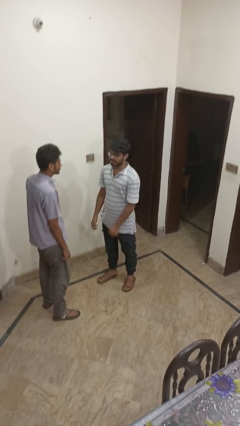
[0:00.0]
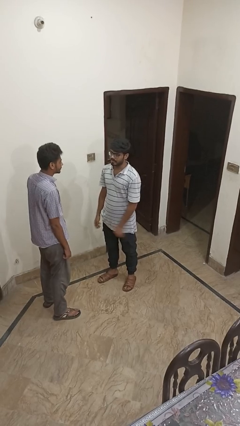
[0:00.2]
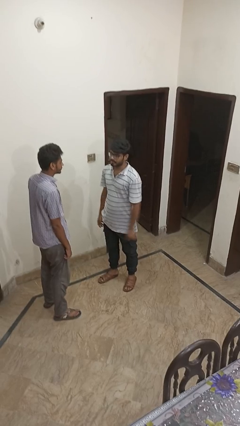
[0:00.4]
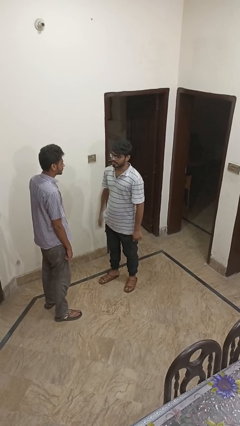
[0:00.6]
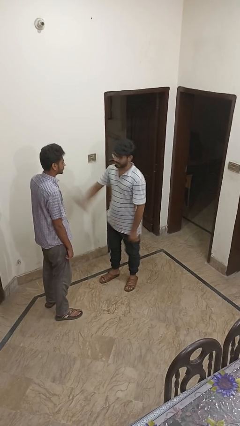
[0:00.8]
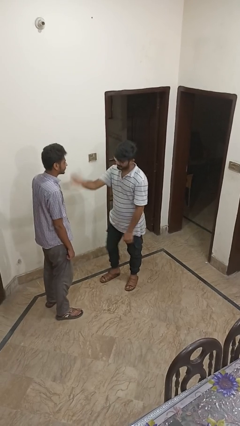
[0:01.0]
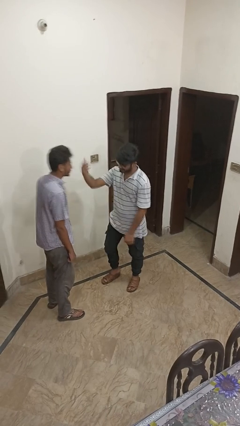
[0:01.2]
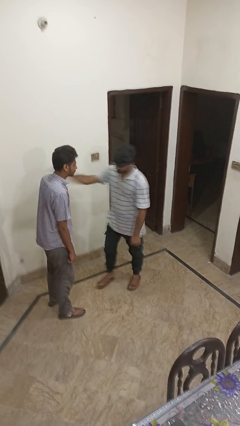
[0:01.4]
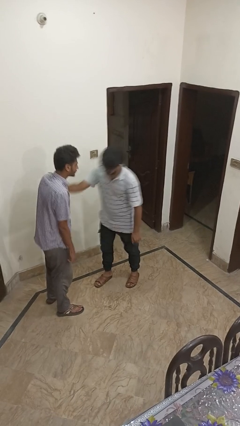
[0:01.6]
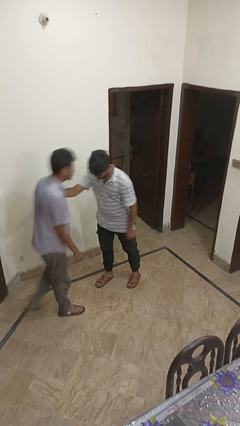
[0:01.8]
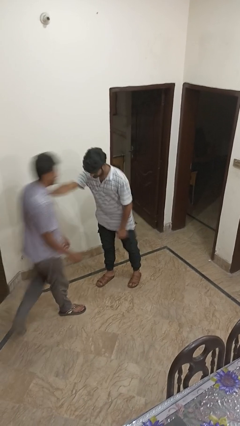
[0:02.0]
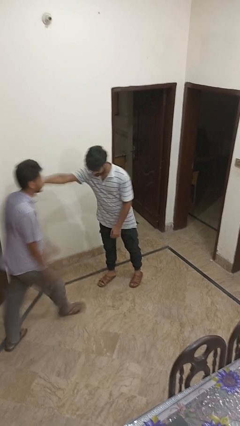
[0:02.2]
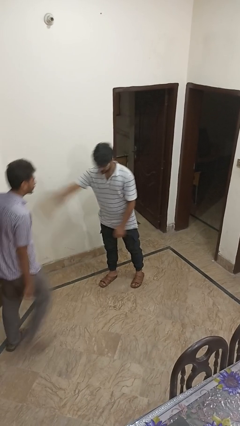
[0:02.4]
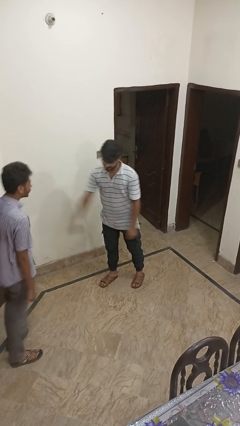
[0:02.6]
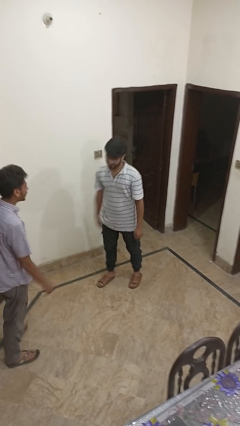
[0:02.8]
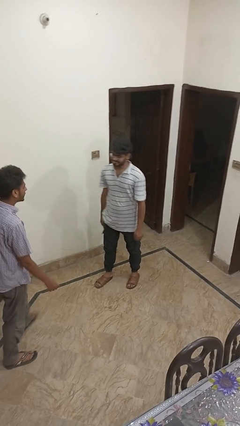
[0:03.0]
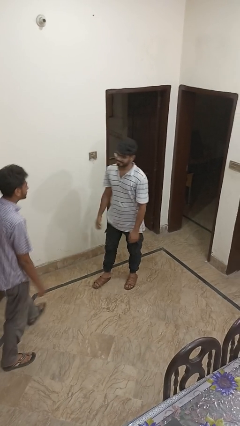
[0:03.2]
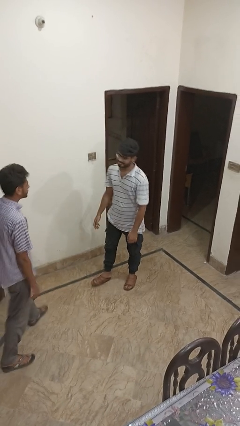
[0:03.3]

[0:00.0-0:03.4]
person shoves person

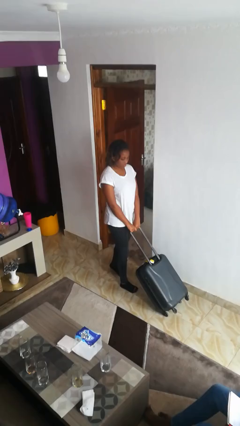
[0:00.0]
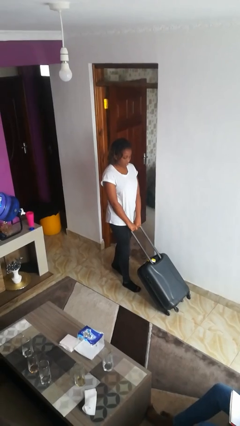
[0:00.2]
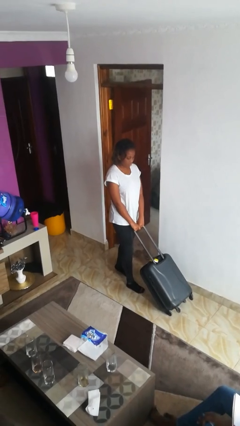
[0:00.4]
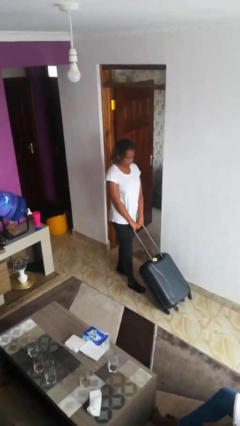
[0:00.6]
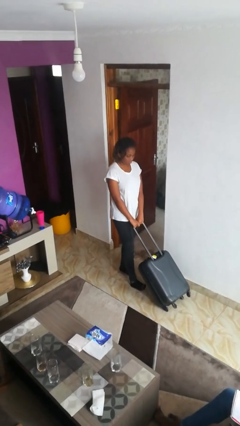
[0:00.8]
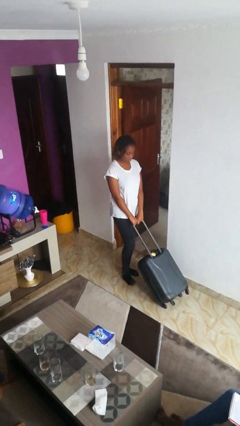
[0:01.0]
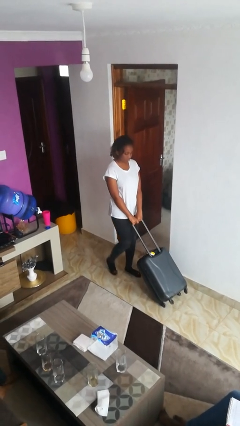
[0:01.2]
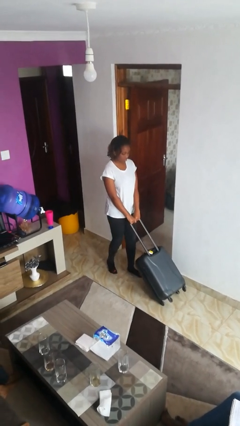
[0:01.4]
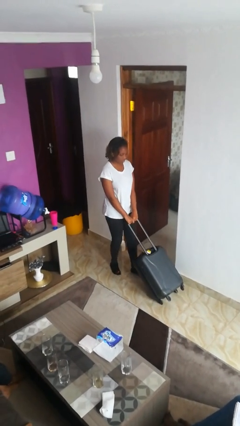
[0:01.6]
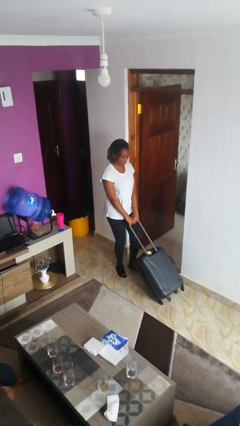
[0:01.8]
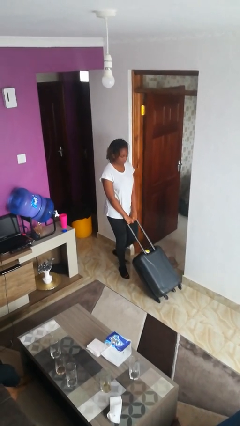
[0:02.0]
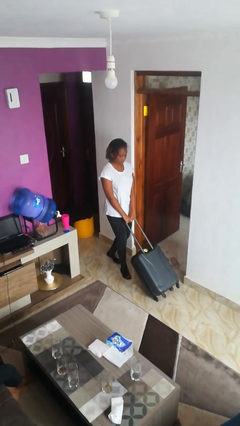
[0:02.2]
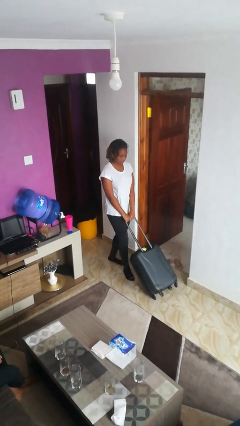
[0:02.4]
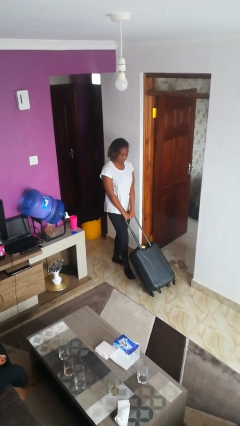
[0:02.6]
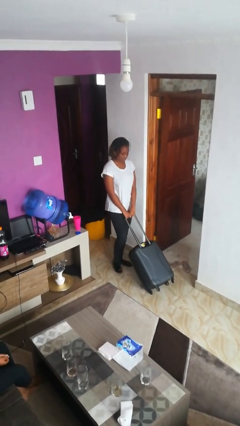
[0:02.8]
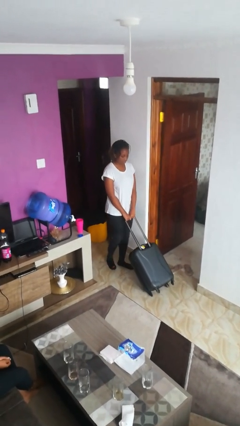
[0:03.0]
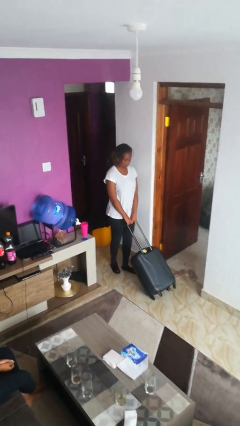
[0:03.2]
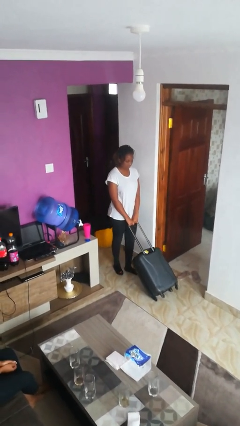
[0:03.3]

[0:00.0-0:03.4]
person pulls wheeled cart

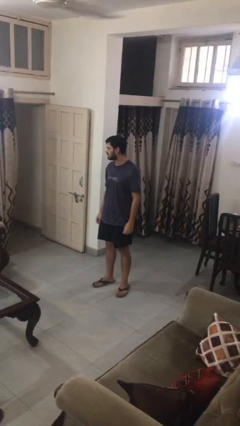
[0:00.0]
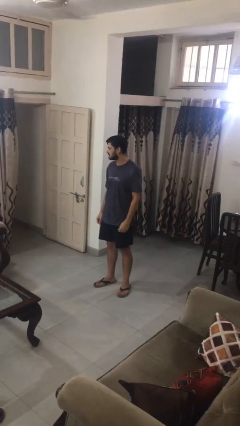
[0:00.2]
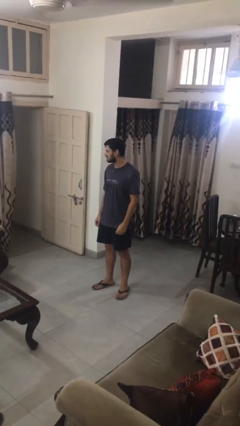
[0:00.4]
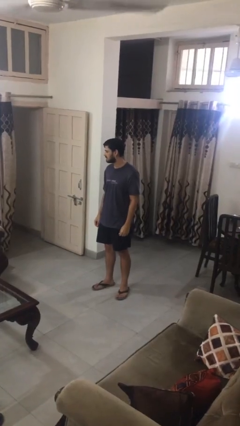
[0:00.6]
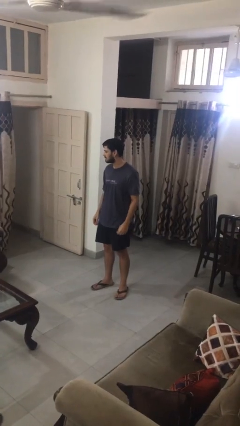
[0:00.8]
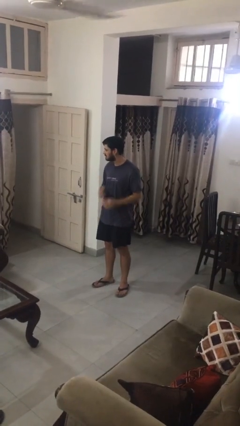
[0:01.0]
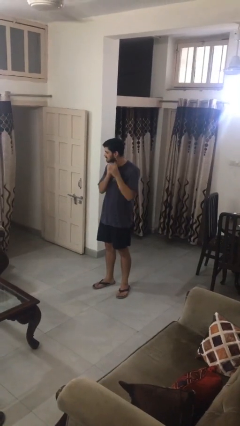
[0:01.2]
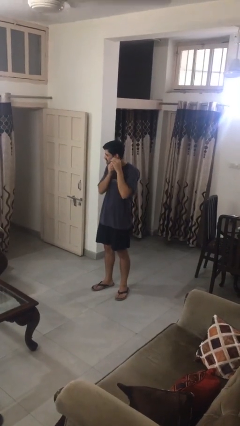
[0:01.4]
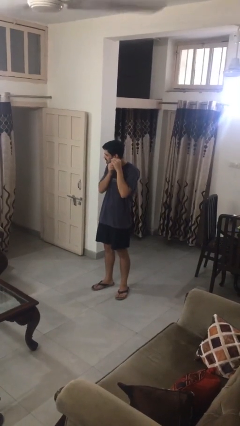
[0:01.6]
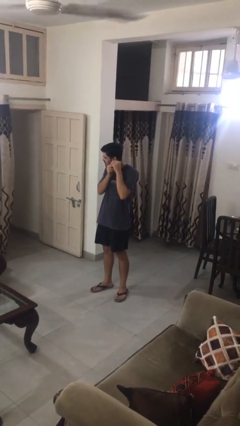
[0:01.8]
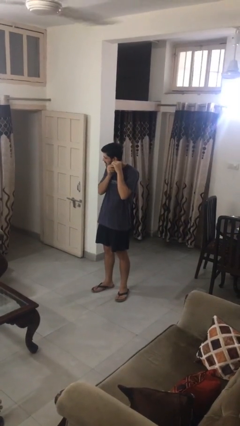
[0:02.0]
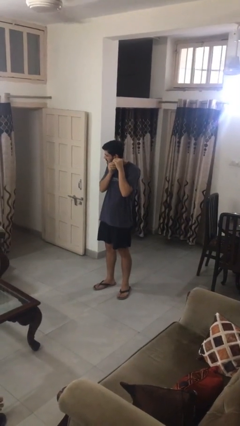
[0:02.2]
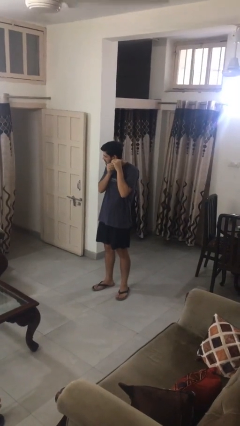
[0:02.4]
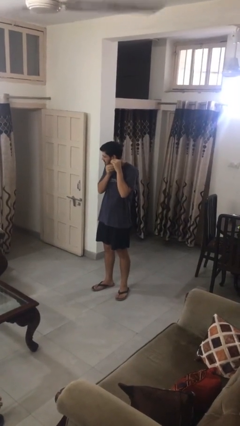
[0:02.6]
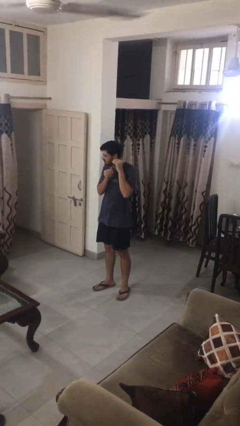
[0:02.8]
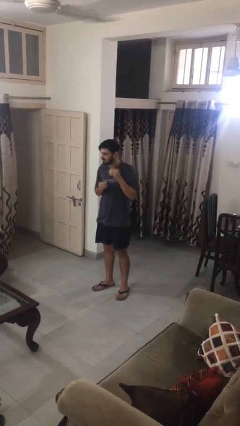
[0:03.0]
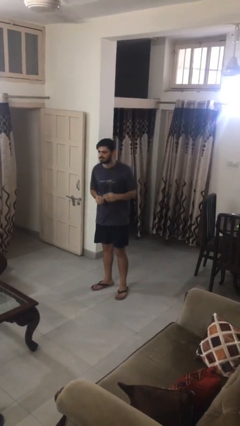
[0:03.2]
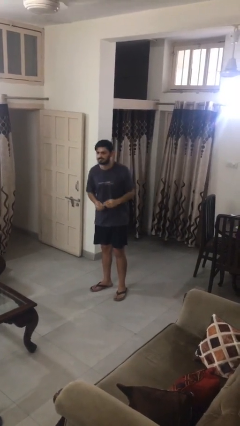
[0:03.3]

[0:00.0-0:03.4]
person takes off earrings

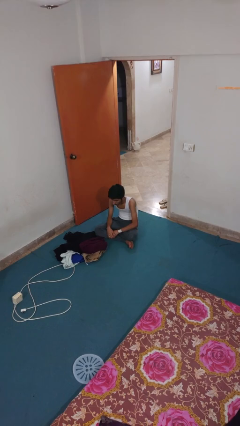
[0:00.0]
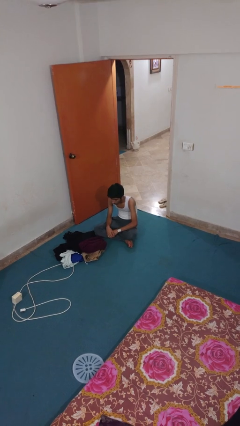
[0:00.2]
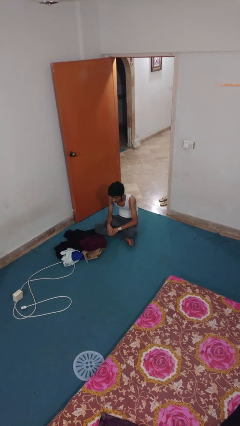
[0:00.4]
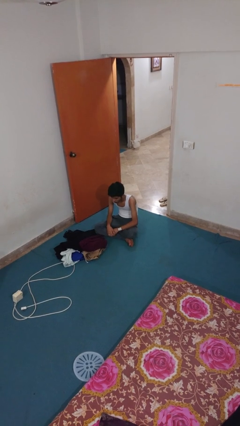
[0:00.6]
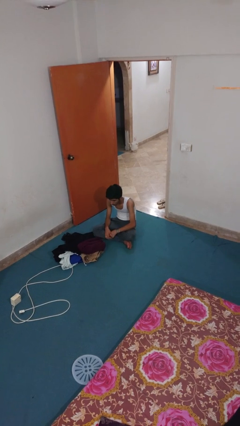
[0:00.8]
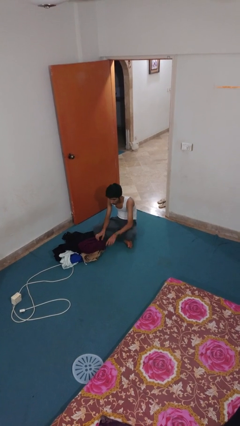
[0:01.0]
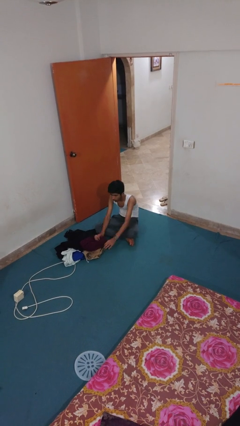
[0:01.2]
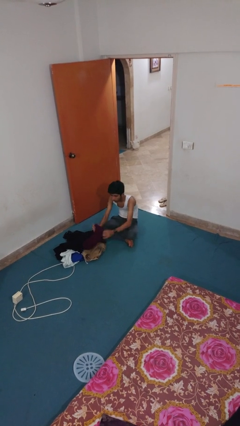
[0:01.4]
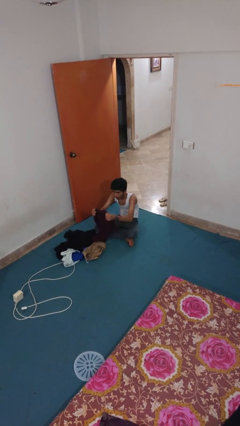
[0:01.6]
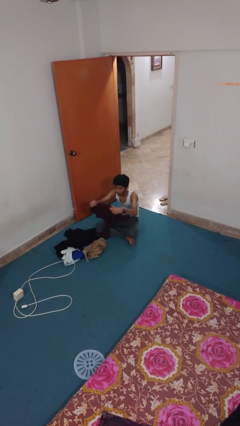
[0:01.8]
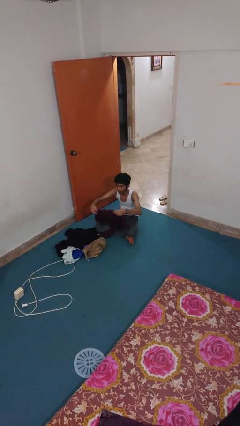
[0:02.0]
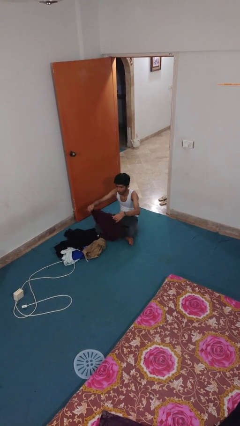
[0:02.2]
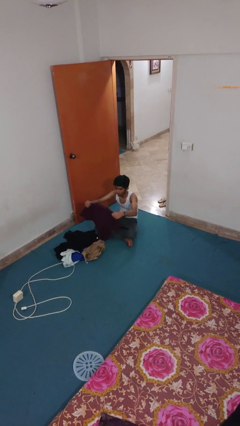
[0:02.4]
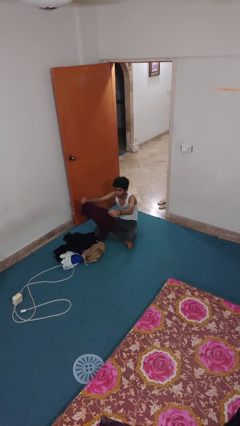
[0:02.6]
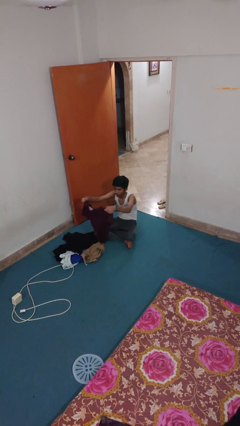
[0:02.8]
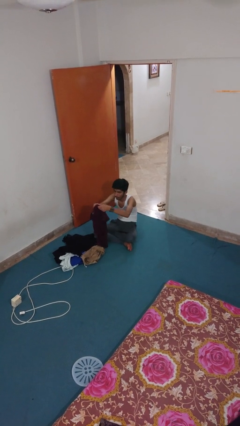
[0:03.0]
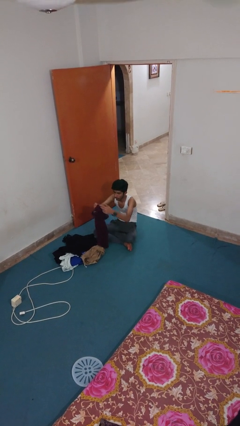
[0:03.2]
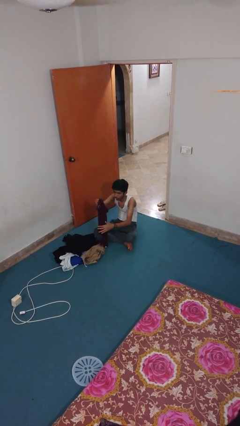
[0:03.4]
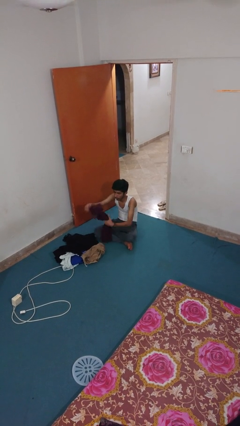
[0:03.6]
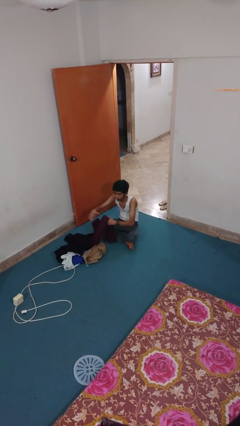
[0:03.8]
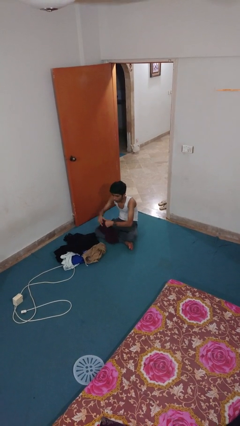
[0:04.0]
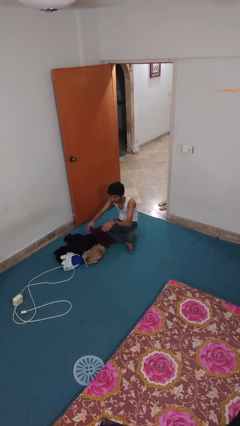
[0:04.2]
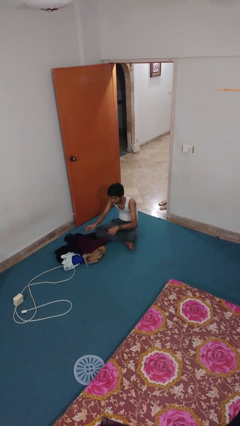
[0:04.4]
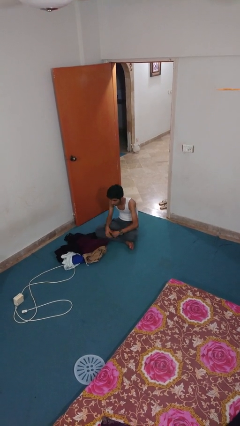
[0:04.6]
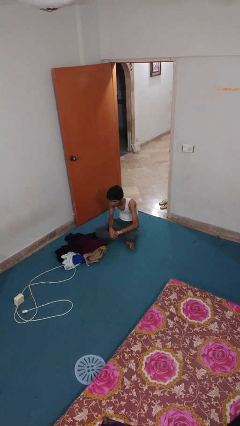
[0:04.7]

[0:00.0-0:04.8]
person folds shirt

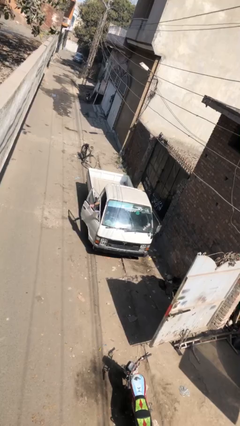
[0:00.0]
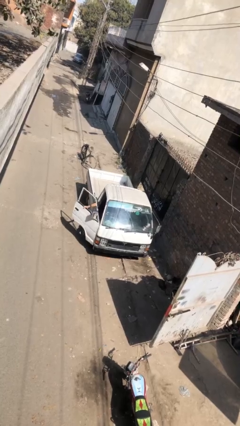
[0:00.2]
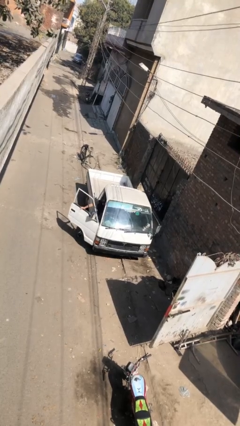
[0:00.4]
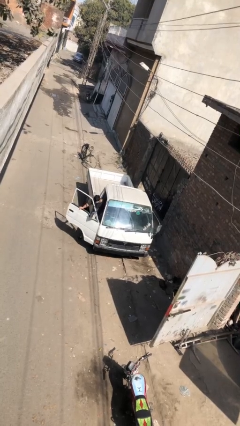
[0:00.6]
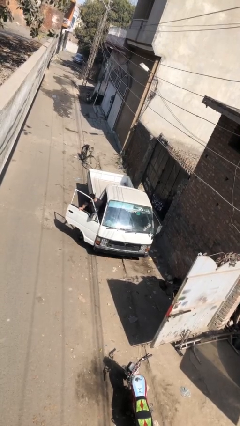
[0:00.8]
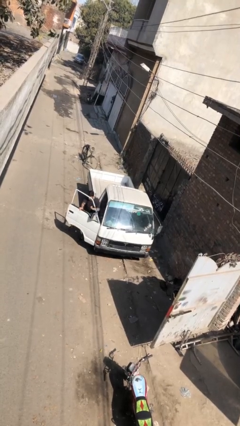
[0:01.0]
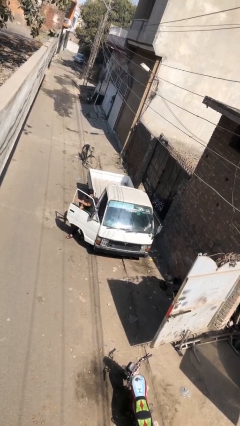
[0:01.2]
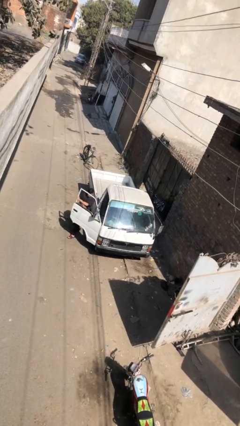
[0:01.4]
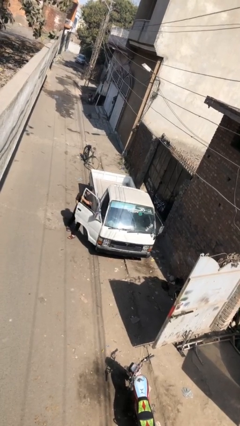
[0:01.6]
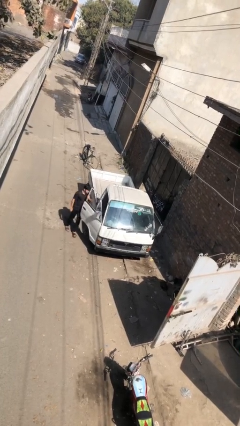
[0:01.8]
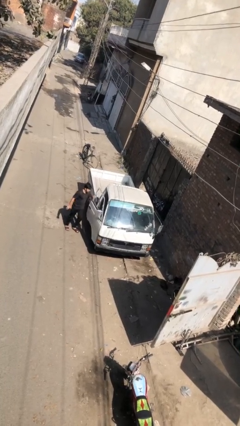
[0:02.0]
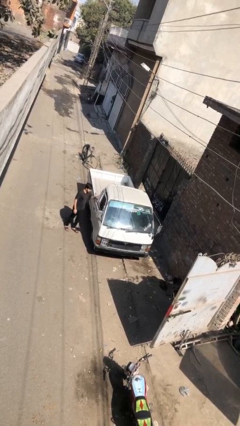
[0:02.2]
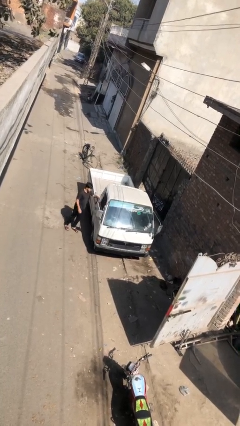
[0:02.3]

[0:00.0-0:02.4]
car drops off person
